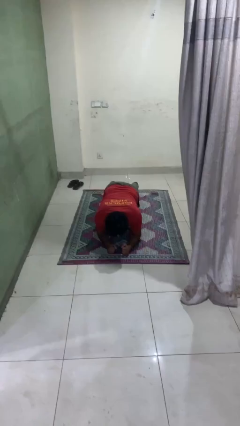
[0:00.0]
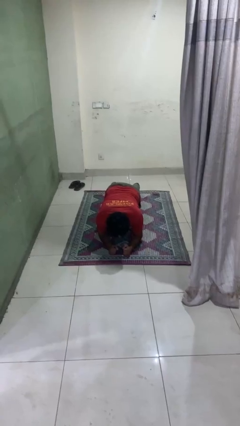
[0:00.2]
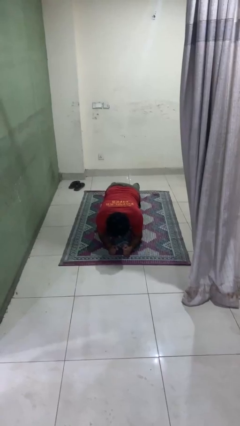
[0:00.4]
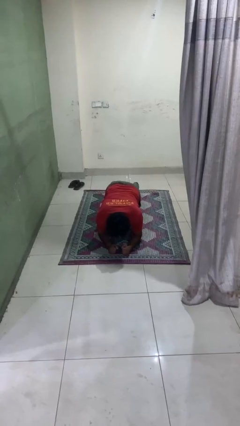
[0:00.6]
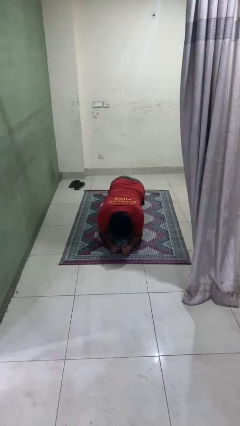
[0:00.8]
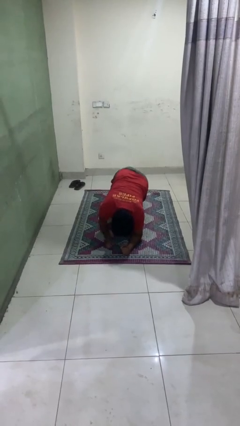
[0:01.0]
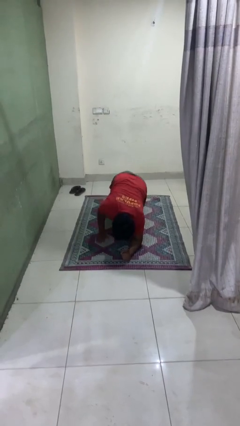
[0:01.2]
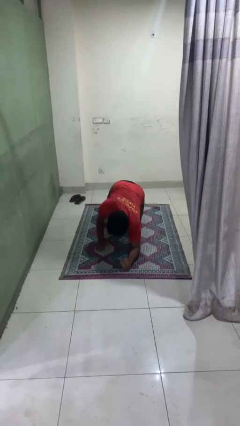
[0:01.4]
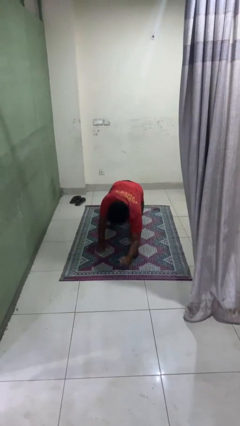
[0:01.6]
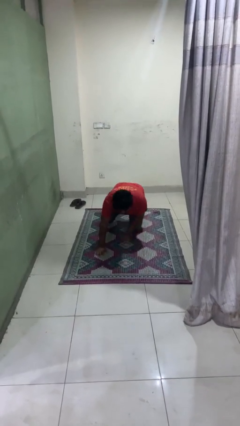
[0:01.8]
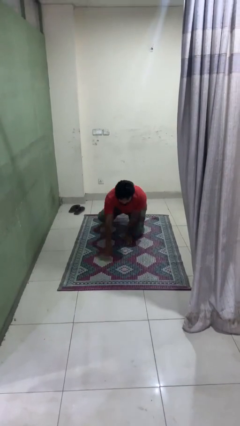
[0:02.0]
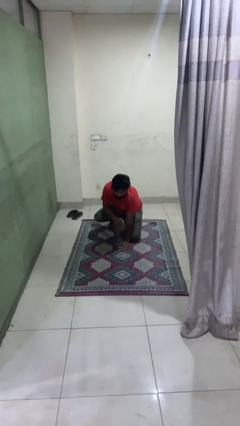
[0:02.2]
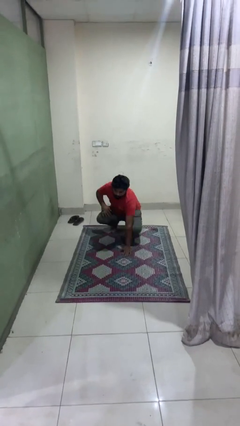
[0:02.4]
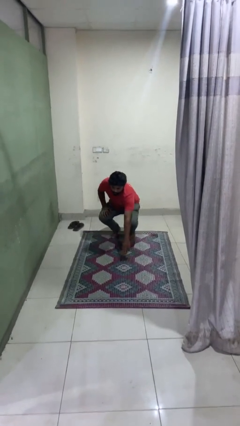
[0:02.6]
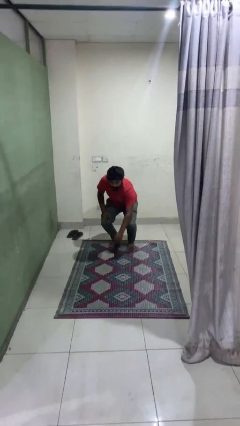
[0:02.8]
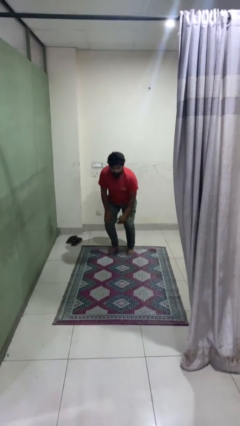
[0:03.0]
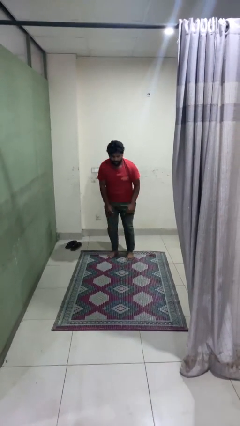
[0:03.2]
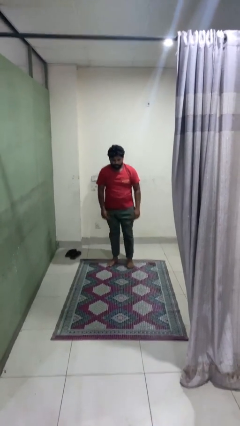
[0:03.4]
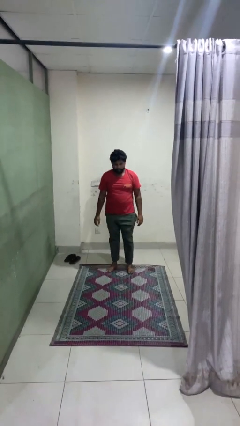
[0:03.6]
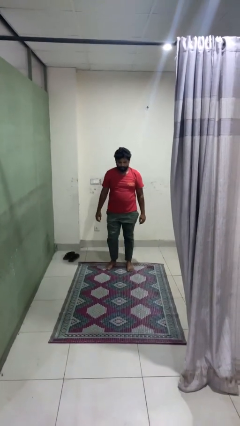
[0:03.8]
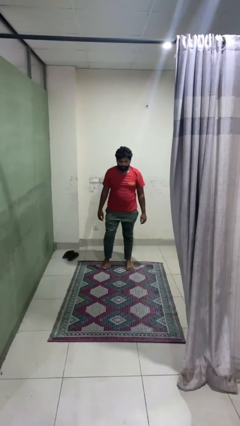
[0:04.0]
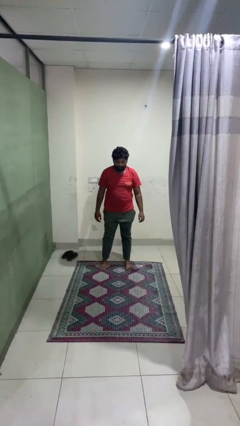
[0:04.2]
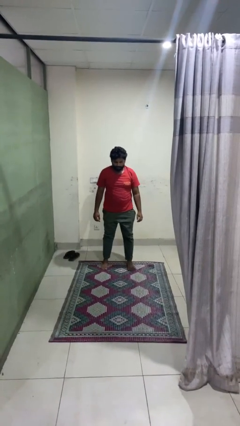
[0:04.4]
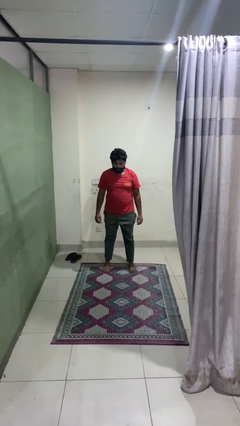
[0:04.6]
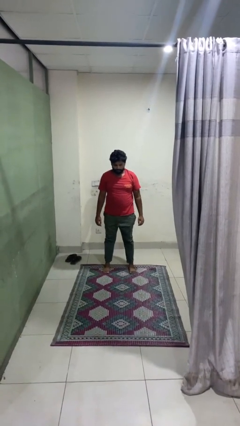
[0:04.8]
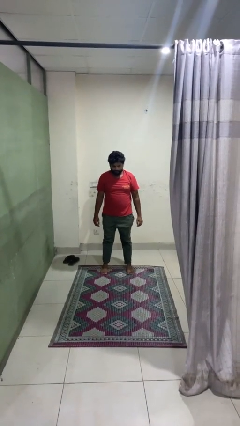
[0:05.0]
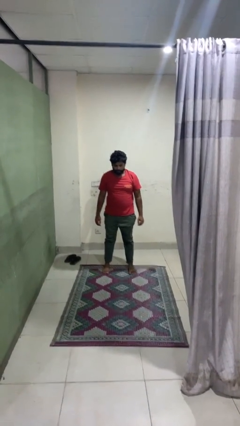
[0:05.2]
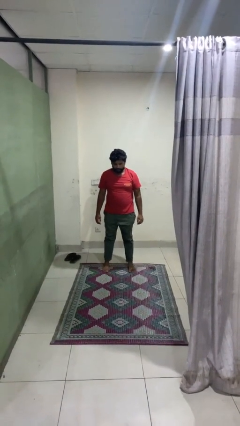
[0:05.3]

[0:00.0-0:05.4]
person stands up from floor

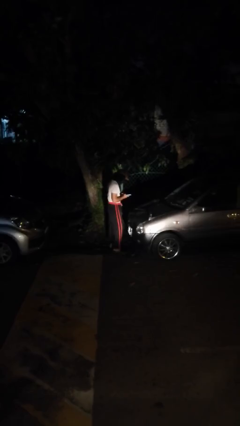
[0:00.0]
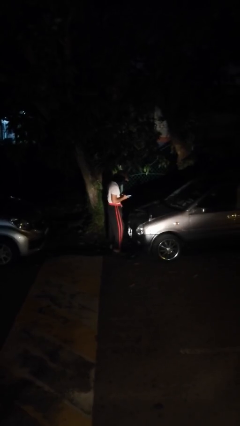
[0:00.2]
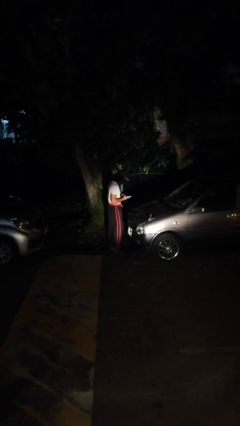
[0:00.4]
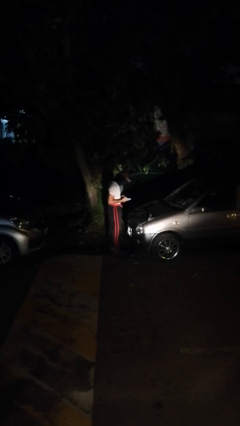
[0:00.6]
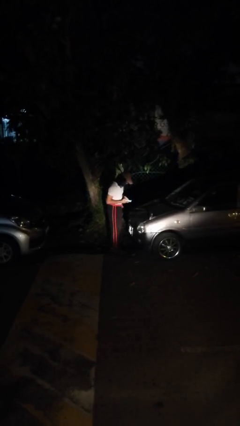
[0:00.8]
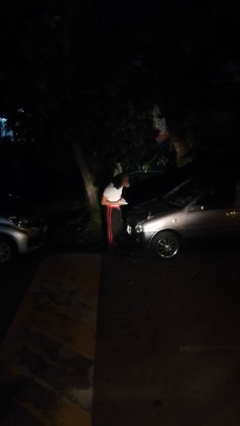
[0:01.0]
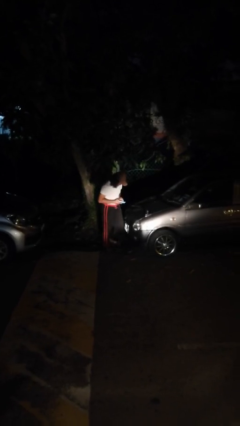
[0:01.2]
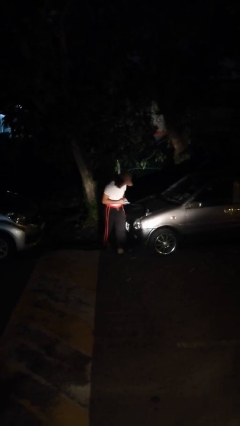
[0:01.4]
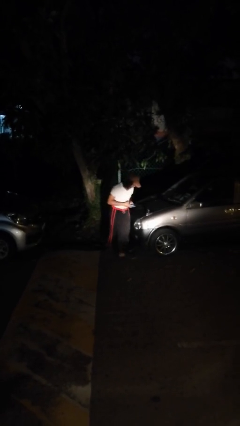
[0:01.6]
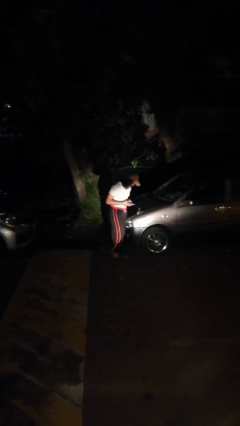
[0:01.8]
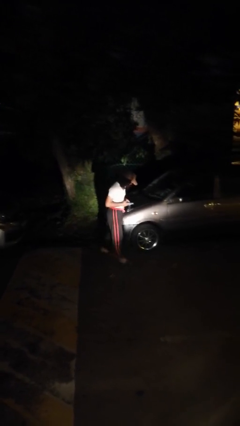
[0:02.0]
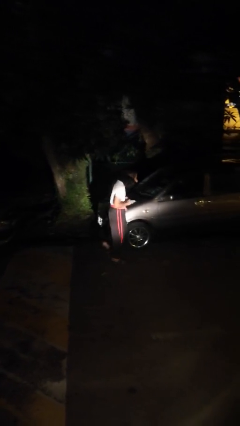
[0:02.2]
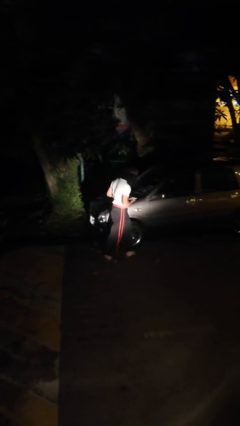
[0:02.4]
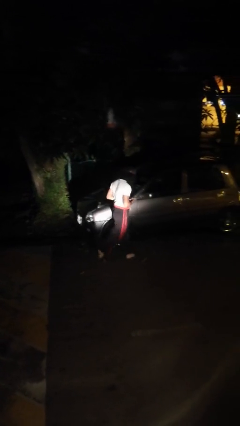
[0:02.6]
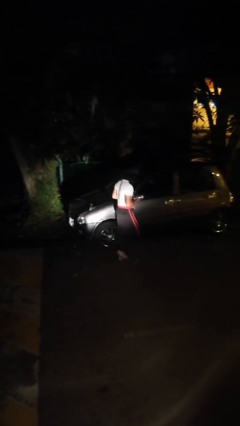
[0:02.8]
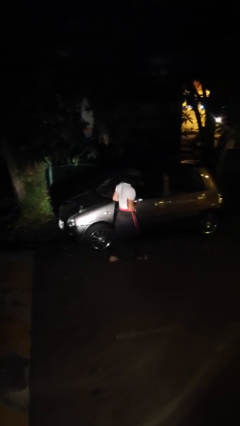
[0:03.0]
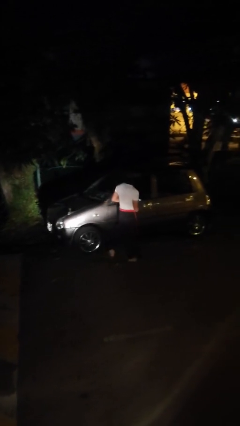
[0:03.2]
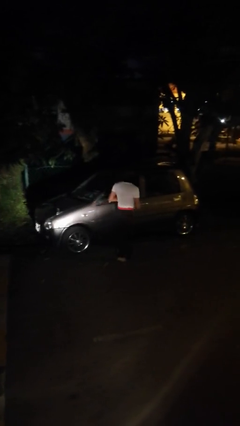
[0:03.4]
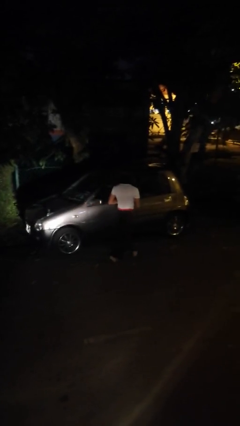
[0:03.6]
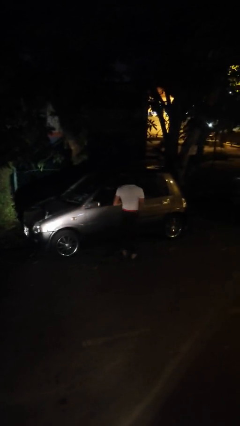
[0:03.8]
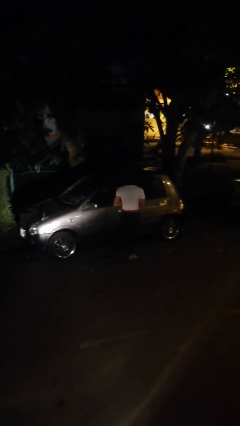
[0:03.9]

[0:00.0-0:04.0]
person walks around car

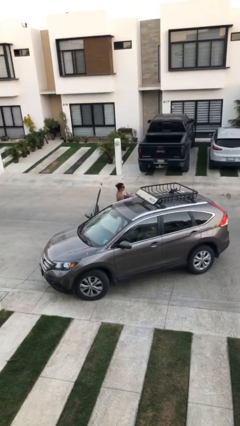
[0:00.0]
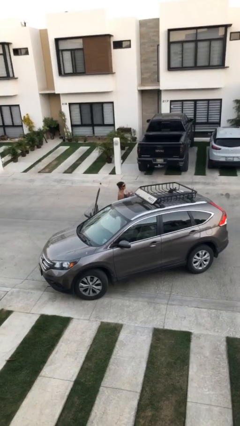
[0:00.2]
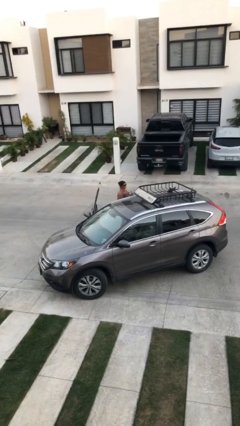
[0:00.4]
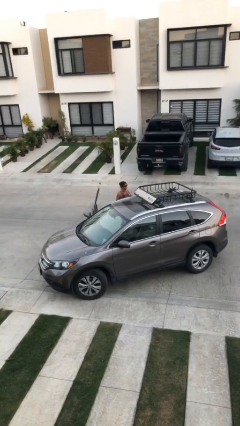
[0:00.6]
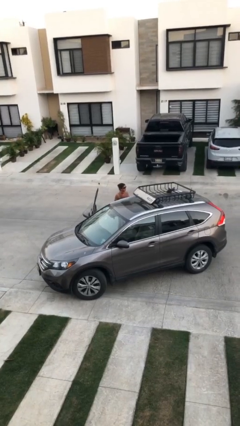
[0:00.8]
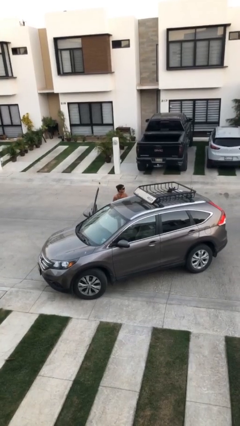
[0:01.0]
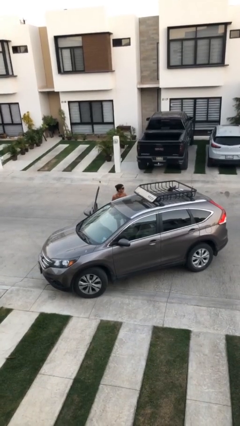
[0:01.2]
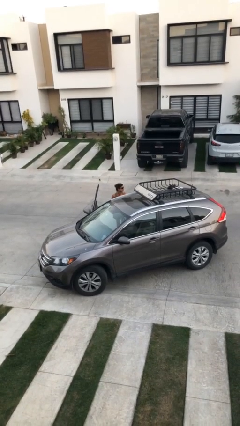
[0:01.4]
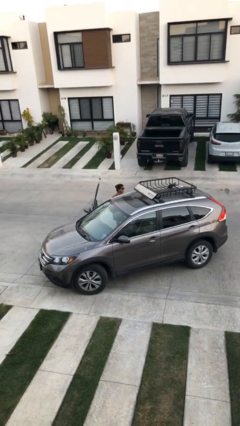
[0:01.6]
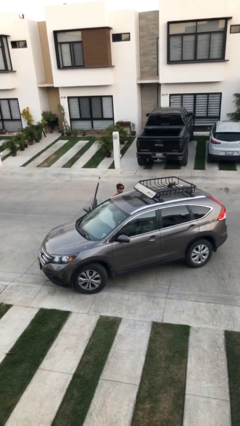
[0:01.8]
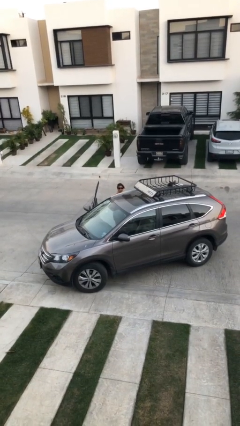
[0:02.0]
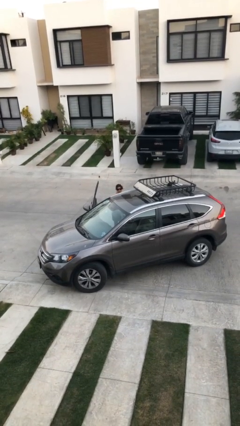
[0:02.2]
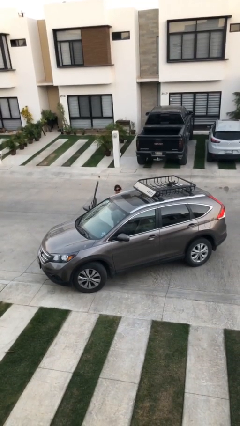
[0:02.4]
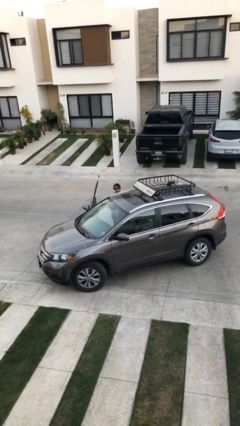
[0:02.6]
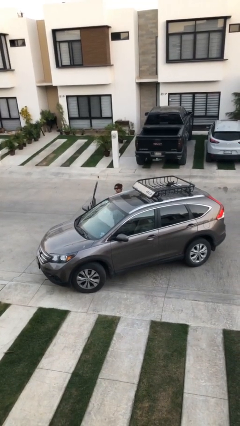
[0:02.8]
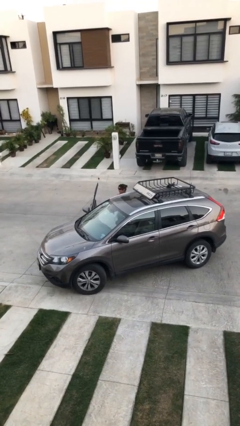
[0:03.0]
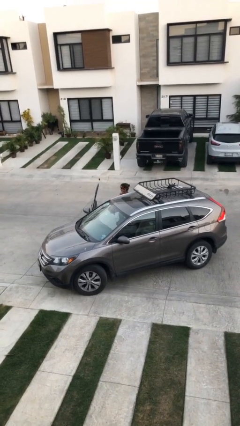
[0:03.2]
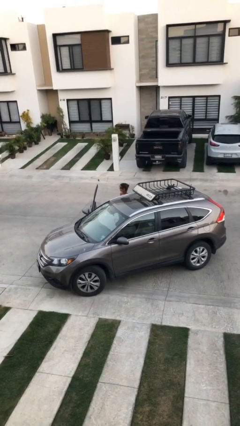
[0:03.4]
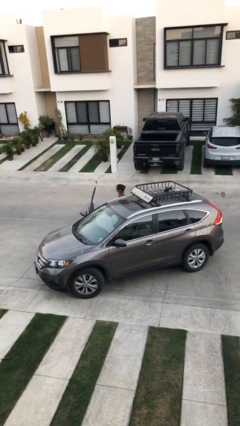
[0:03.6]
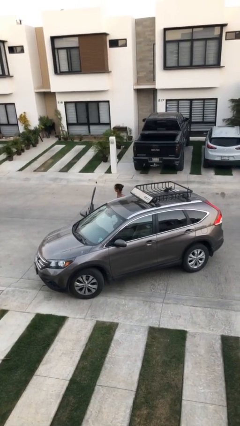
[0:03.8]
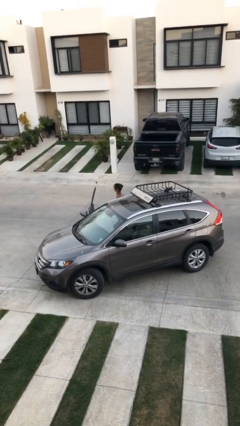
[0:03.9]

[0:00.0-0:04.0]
person loads car

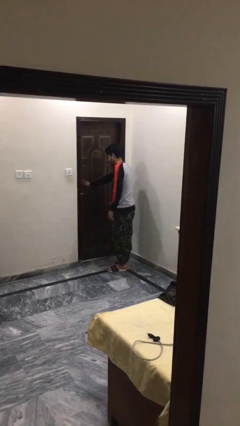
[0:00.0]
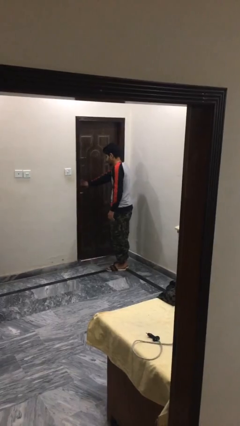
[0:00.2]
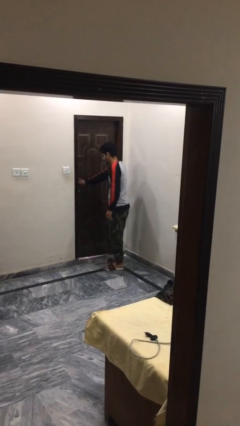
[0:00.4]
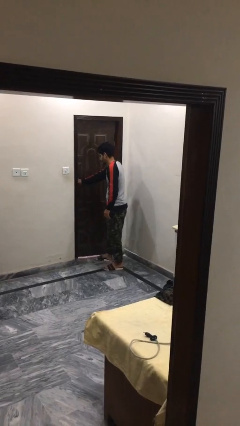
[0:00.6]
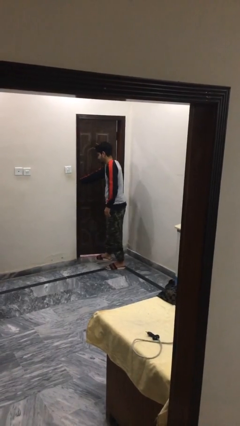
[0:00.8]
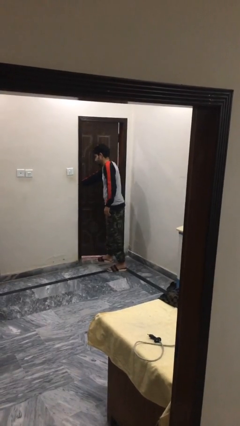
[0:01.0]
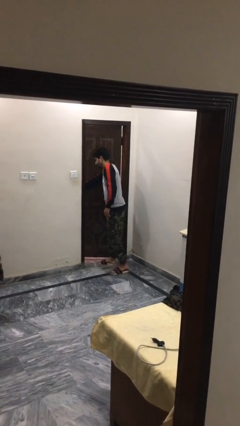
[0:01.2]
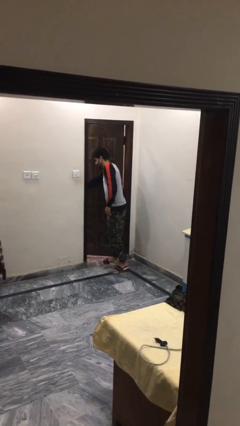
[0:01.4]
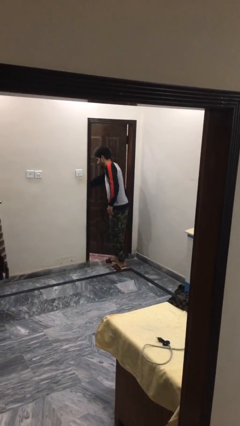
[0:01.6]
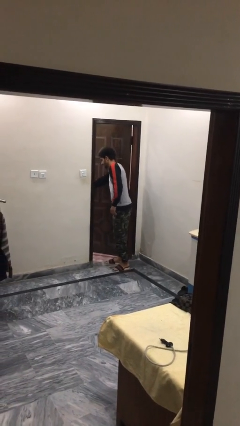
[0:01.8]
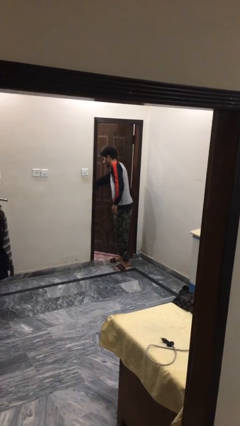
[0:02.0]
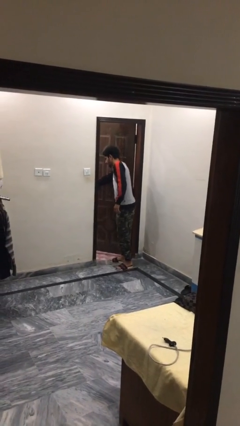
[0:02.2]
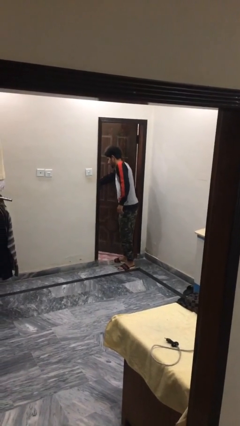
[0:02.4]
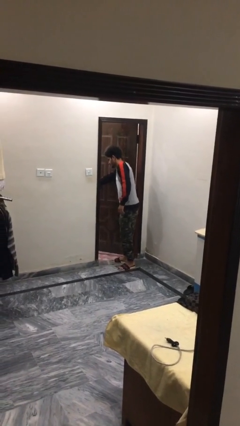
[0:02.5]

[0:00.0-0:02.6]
person opens facility door

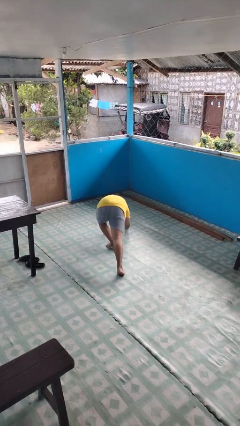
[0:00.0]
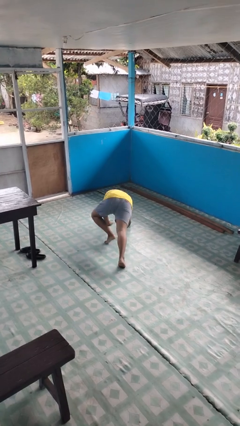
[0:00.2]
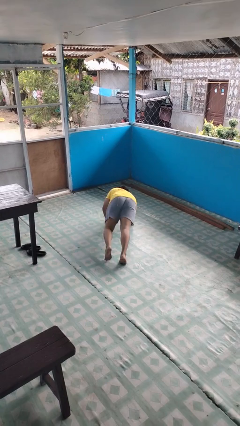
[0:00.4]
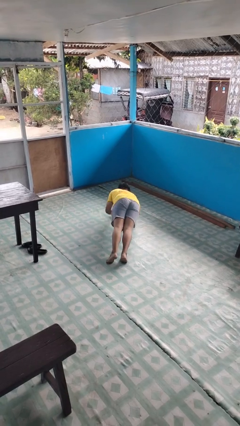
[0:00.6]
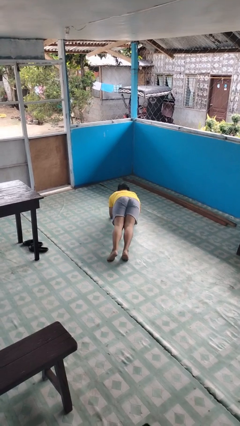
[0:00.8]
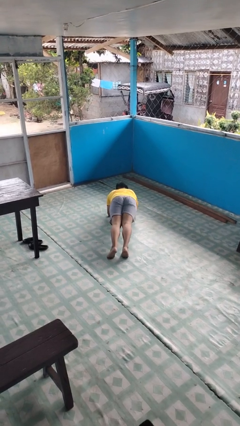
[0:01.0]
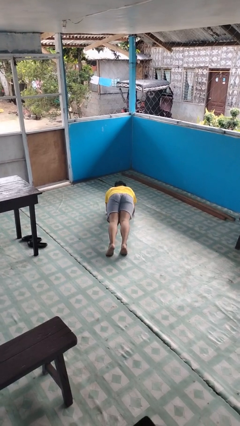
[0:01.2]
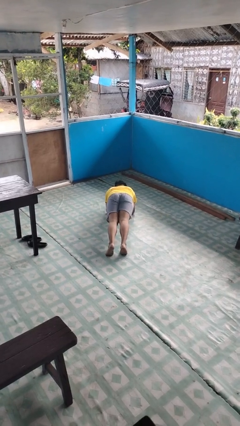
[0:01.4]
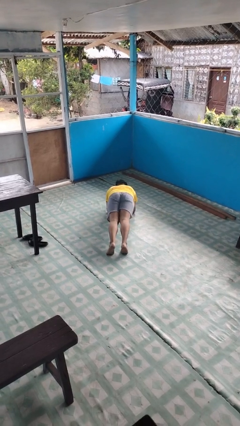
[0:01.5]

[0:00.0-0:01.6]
person exercises with plank
